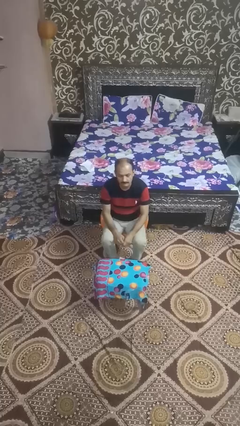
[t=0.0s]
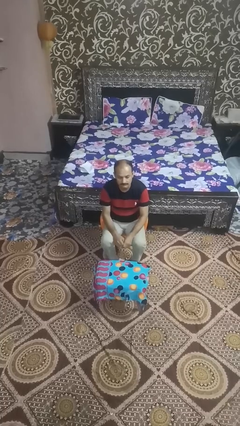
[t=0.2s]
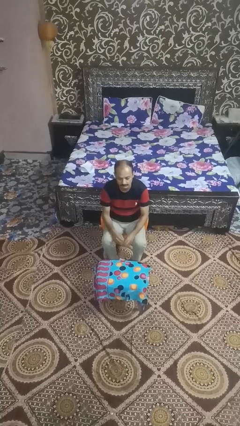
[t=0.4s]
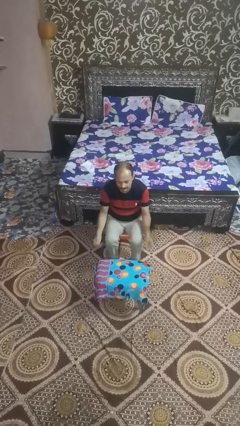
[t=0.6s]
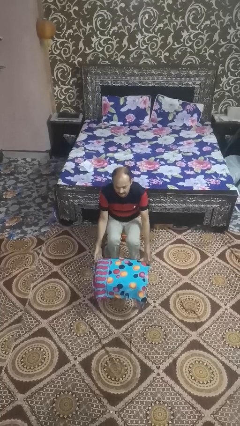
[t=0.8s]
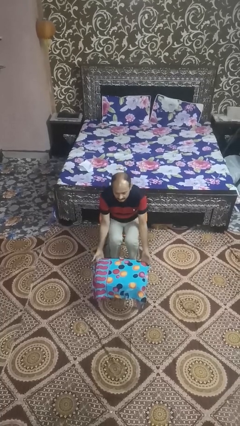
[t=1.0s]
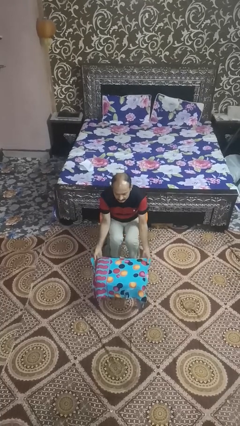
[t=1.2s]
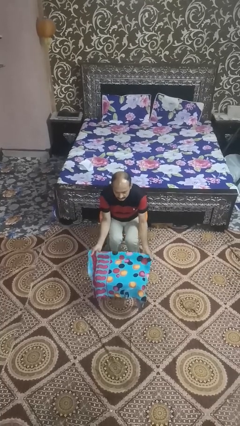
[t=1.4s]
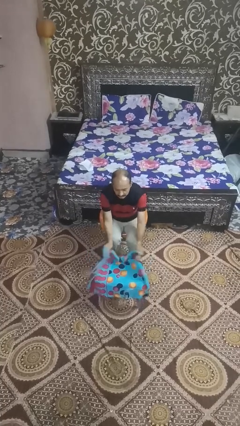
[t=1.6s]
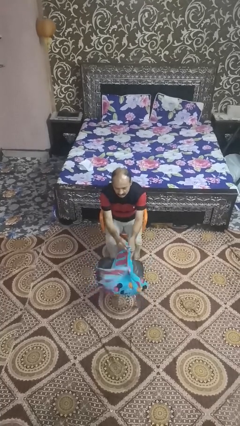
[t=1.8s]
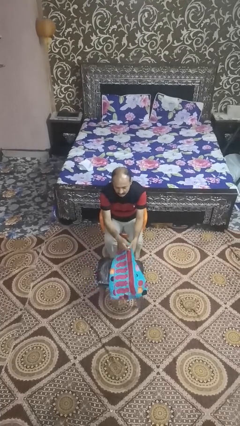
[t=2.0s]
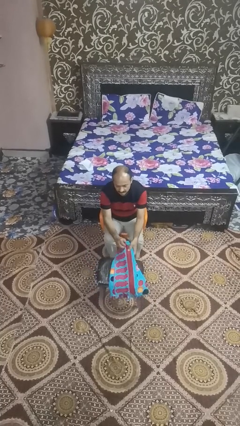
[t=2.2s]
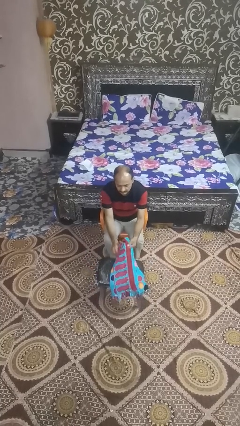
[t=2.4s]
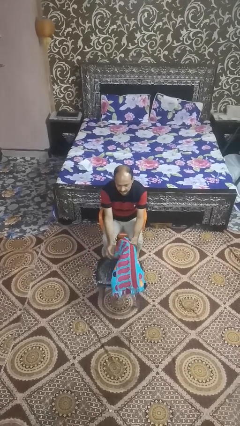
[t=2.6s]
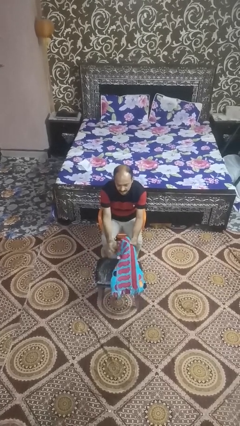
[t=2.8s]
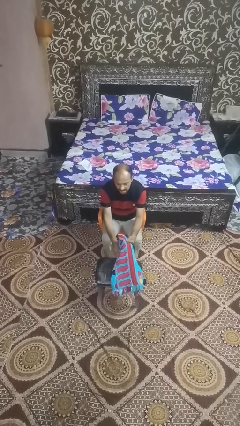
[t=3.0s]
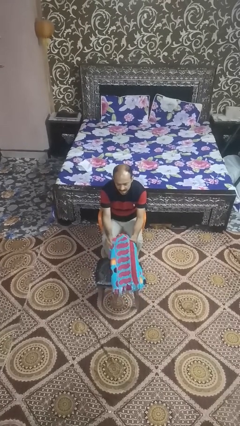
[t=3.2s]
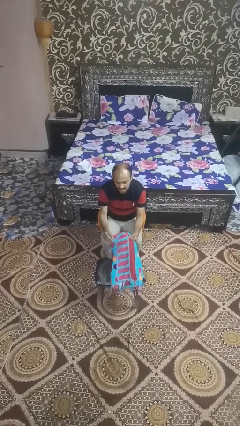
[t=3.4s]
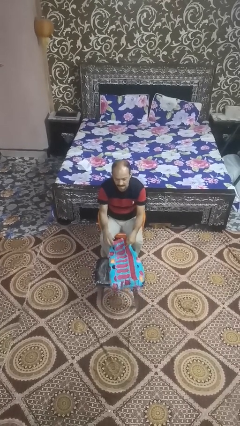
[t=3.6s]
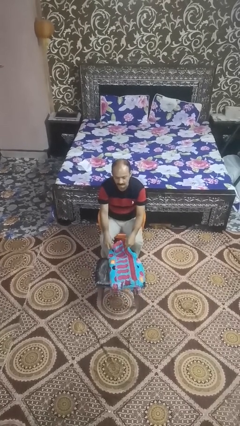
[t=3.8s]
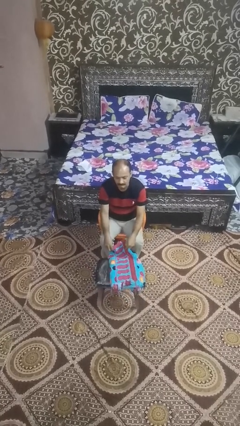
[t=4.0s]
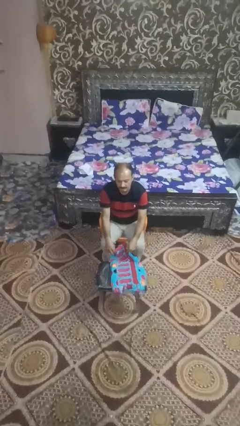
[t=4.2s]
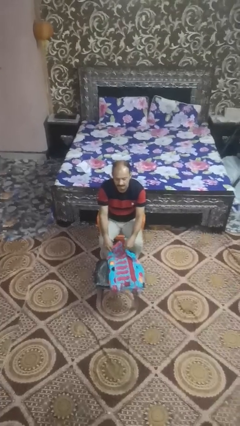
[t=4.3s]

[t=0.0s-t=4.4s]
person folds tablecloth

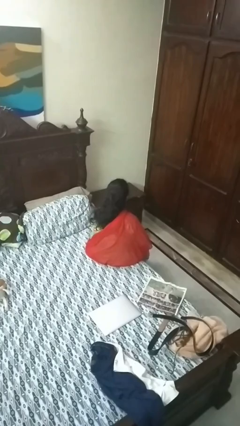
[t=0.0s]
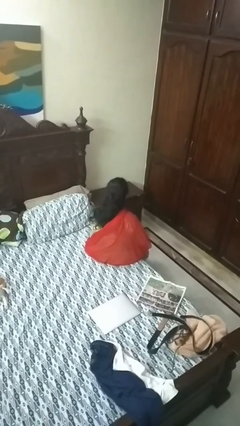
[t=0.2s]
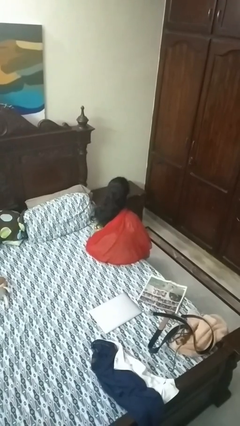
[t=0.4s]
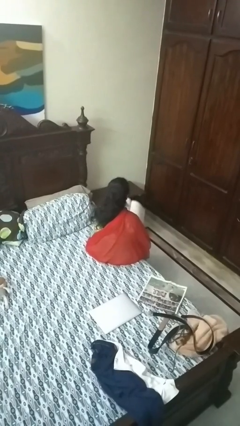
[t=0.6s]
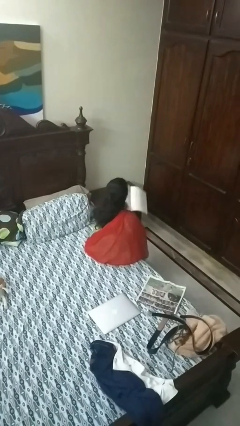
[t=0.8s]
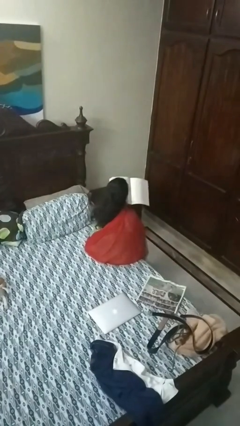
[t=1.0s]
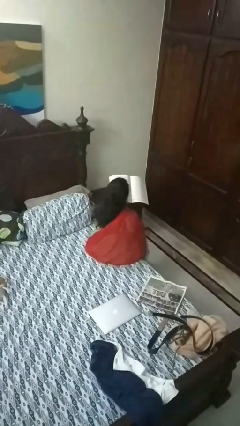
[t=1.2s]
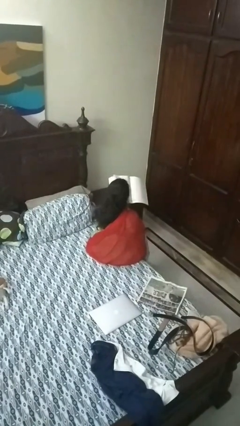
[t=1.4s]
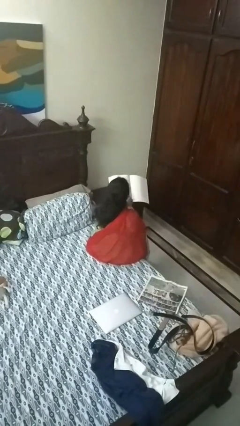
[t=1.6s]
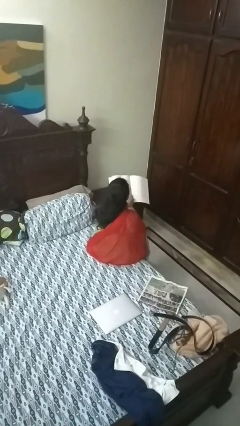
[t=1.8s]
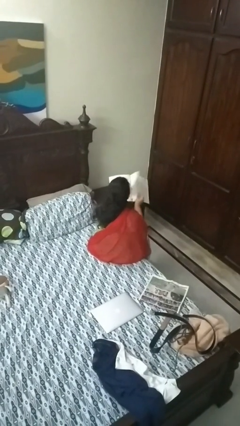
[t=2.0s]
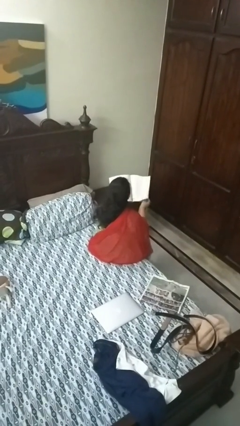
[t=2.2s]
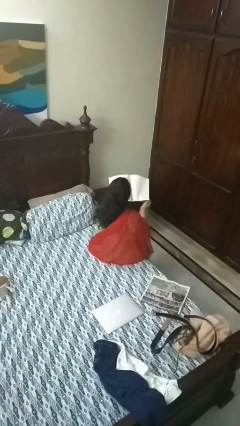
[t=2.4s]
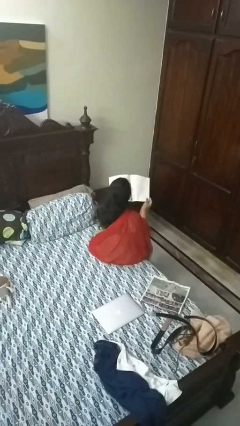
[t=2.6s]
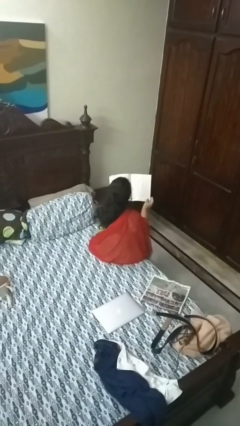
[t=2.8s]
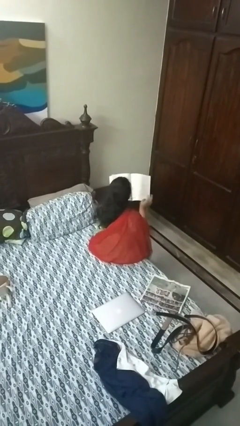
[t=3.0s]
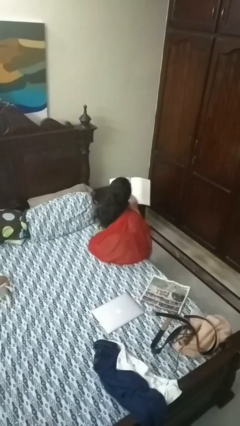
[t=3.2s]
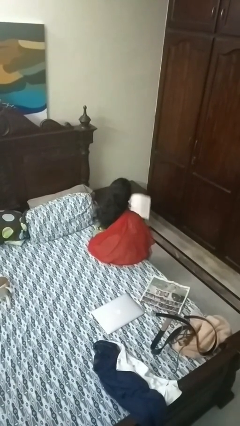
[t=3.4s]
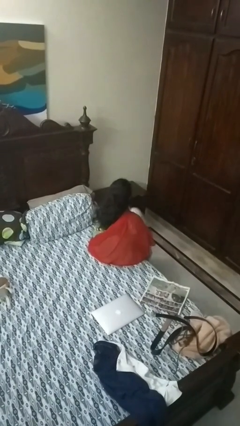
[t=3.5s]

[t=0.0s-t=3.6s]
person reads book

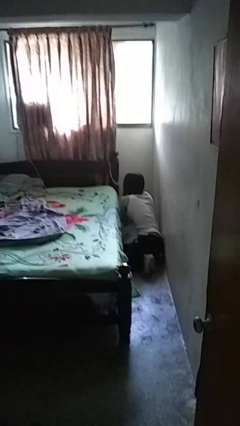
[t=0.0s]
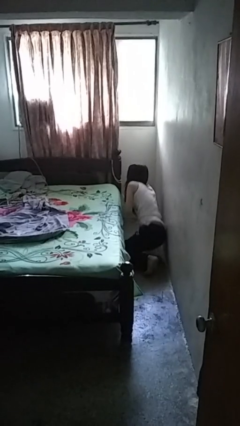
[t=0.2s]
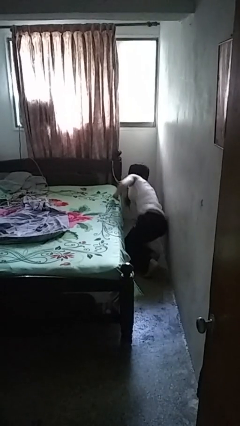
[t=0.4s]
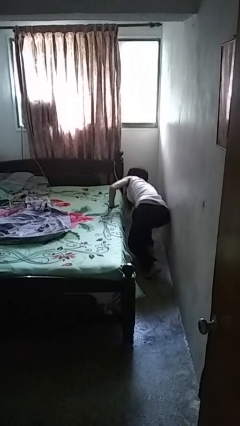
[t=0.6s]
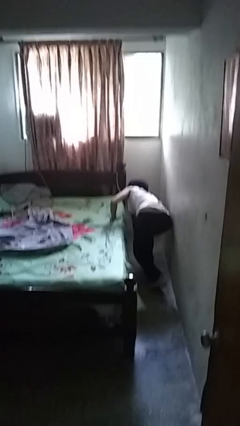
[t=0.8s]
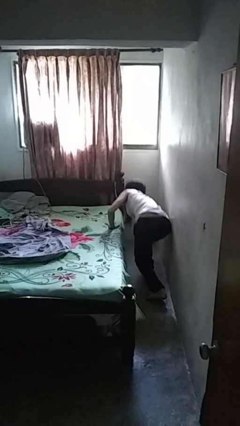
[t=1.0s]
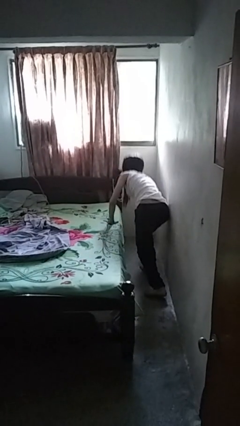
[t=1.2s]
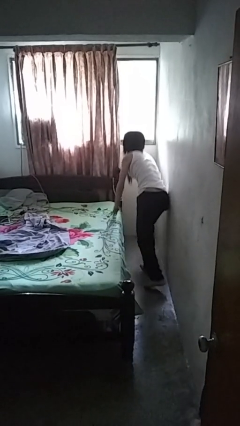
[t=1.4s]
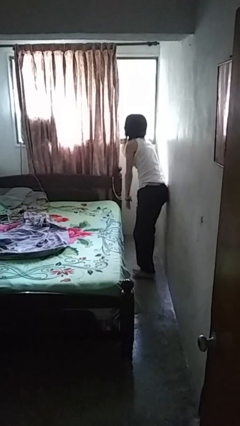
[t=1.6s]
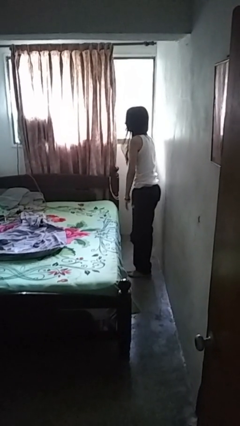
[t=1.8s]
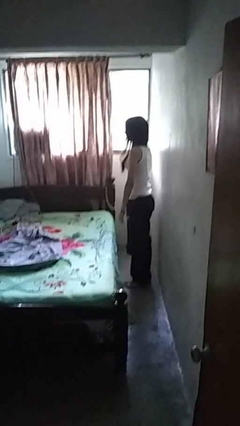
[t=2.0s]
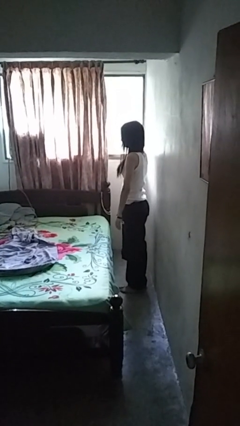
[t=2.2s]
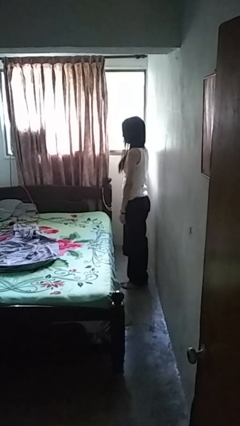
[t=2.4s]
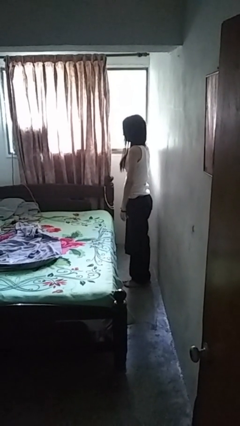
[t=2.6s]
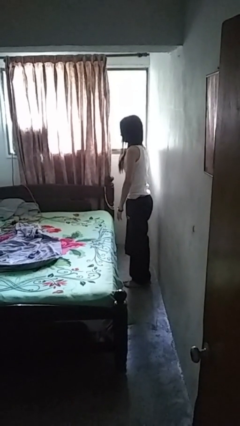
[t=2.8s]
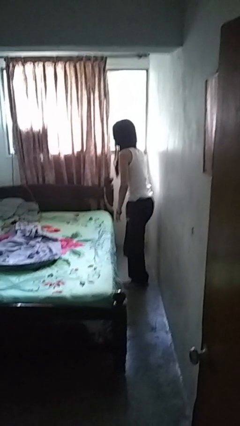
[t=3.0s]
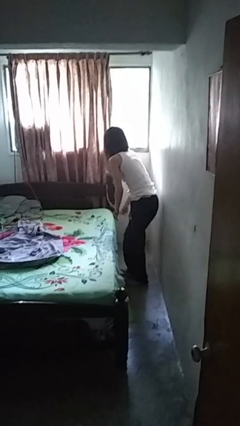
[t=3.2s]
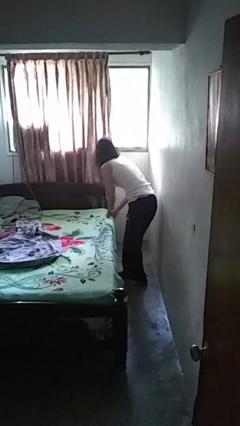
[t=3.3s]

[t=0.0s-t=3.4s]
person stands up from floor

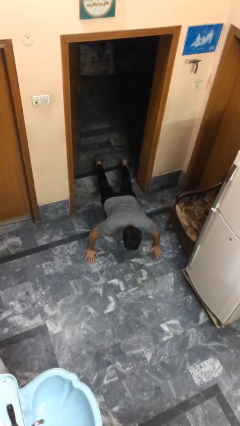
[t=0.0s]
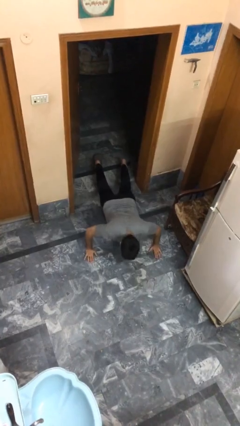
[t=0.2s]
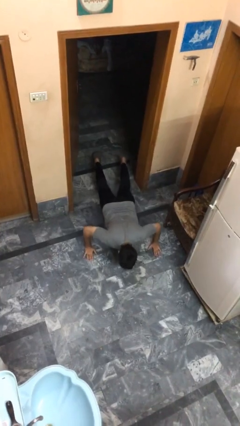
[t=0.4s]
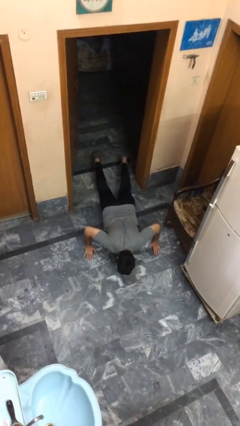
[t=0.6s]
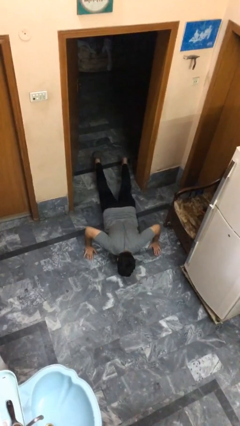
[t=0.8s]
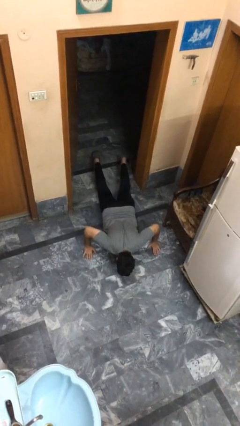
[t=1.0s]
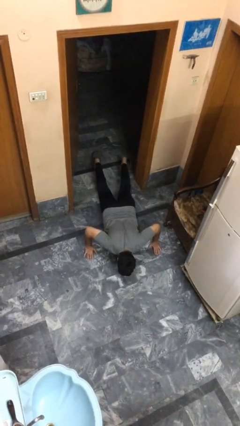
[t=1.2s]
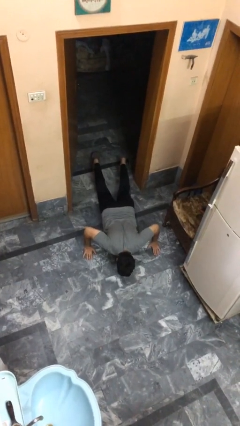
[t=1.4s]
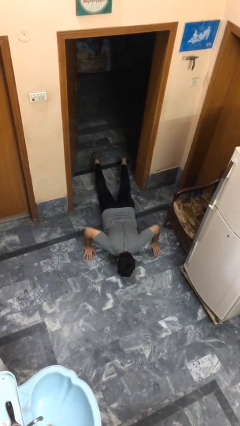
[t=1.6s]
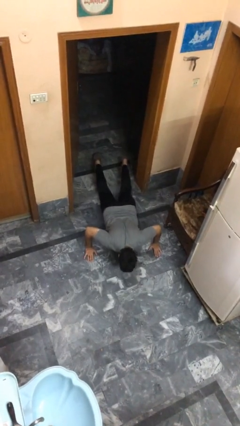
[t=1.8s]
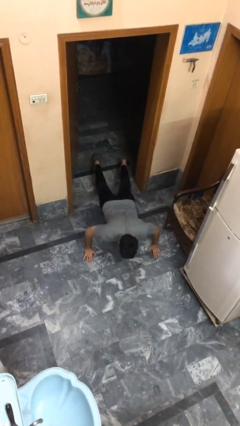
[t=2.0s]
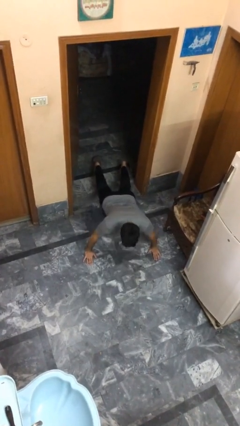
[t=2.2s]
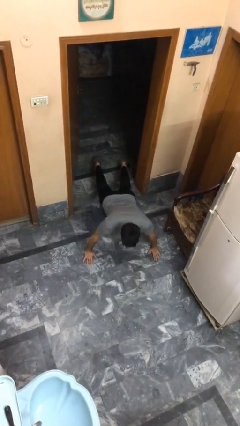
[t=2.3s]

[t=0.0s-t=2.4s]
person exercises with pushup

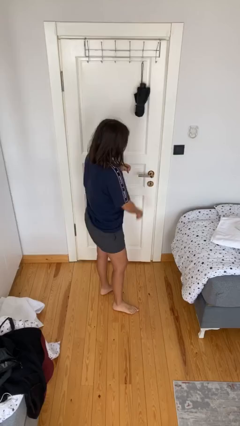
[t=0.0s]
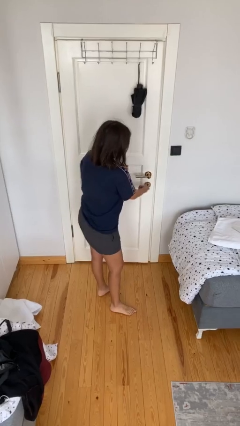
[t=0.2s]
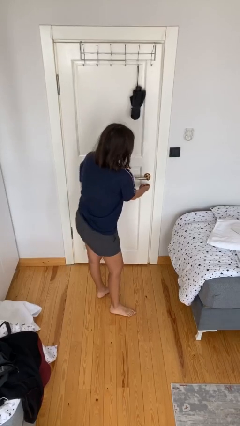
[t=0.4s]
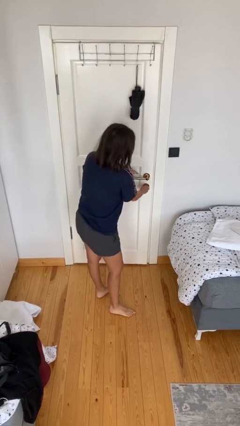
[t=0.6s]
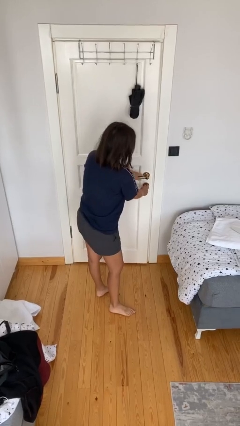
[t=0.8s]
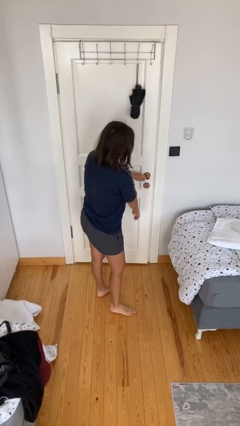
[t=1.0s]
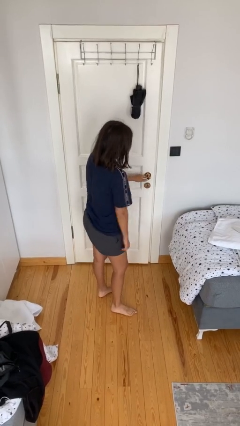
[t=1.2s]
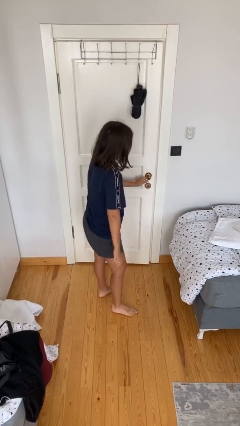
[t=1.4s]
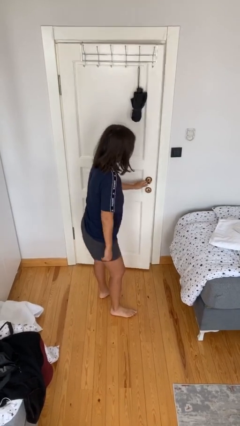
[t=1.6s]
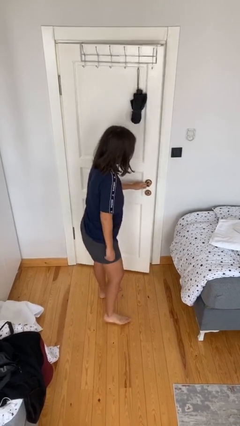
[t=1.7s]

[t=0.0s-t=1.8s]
person unlocks door with keys

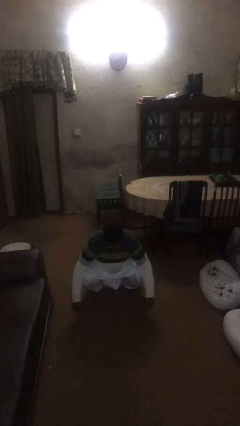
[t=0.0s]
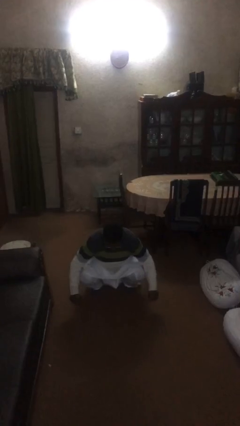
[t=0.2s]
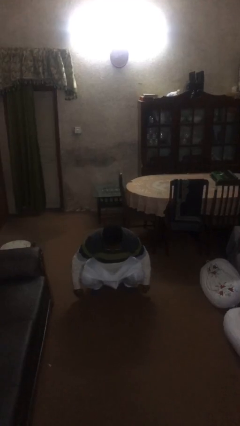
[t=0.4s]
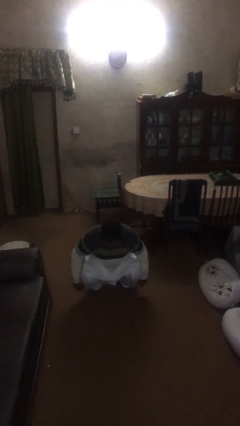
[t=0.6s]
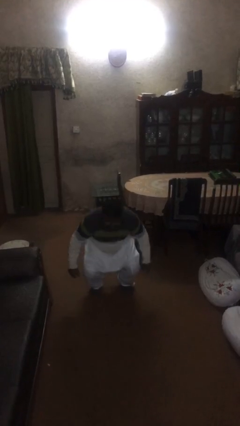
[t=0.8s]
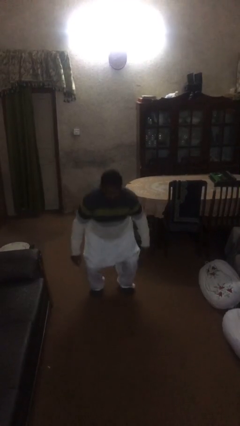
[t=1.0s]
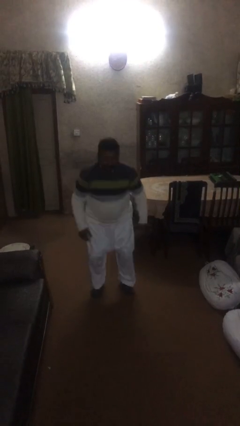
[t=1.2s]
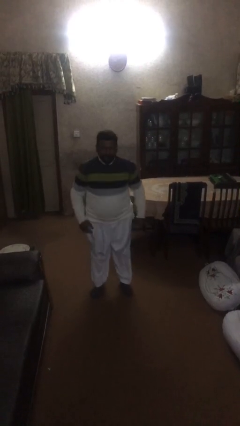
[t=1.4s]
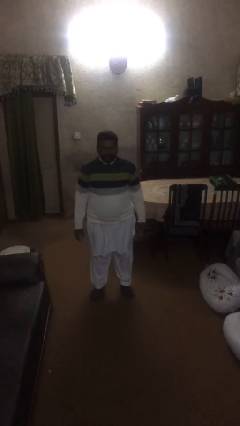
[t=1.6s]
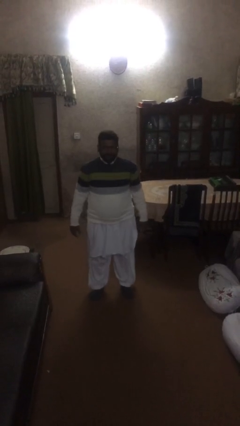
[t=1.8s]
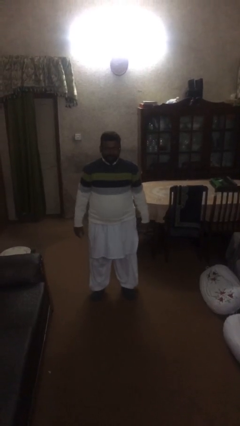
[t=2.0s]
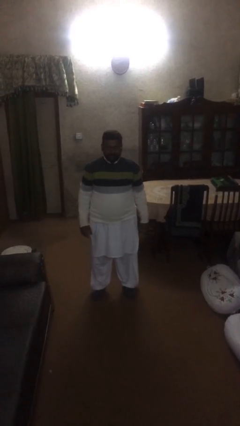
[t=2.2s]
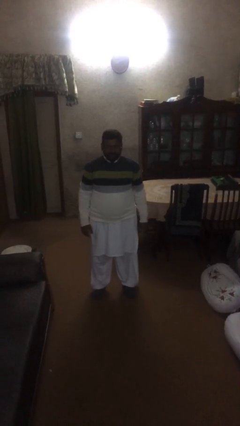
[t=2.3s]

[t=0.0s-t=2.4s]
person stands up
